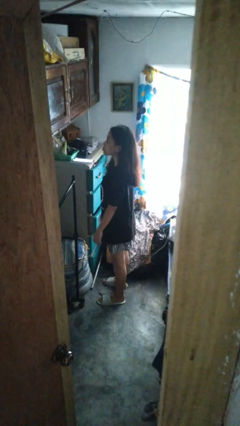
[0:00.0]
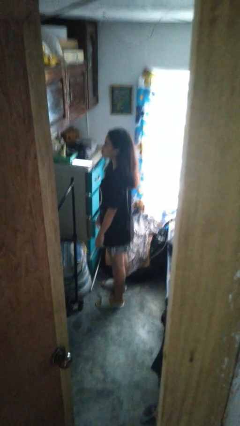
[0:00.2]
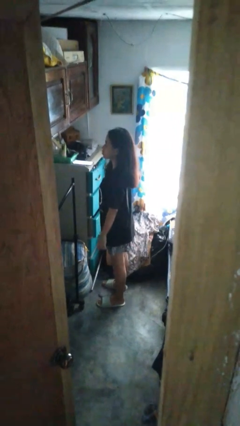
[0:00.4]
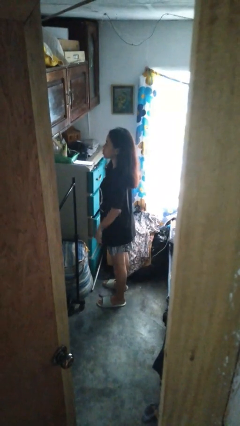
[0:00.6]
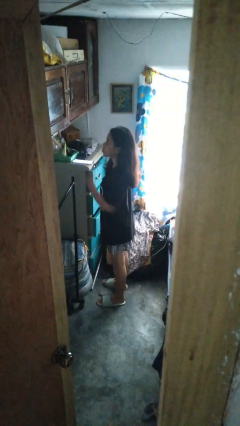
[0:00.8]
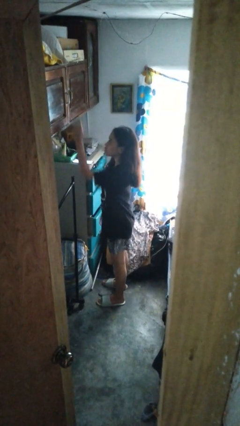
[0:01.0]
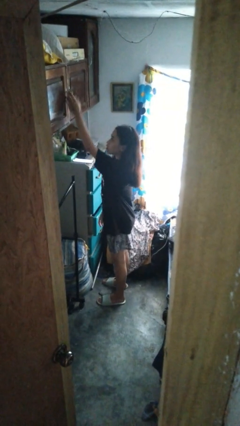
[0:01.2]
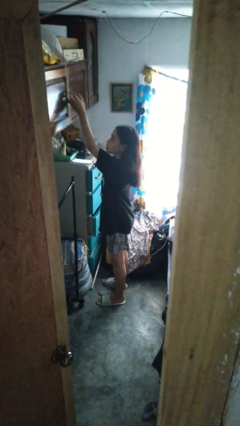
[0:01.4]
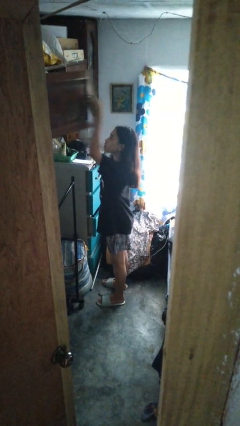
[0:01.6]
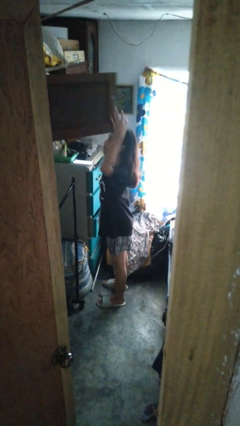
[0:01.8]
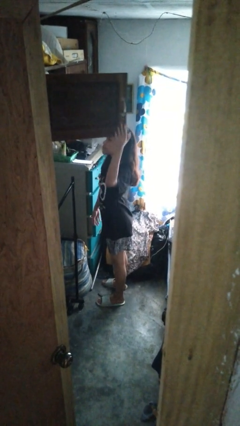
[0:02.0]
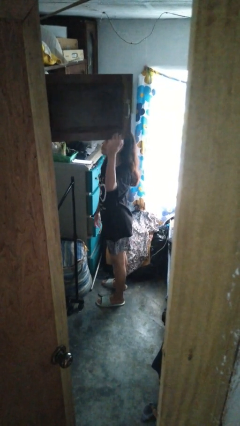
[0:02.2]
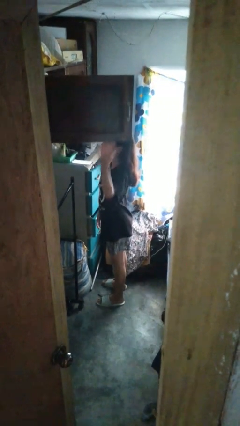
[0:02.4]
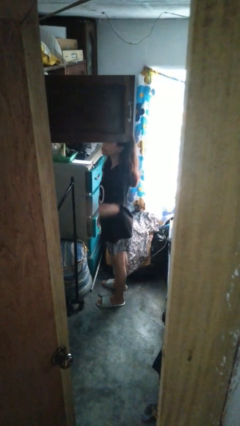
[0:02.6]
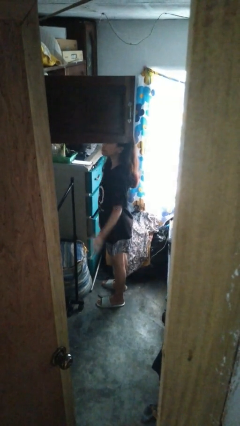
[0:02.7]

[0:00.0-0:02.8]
person opens closet door

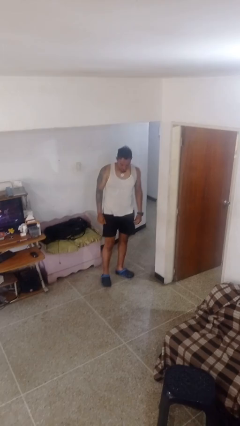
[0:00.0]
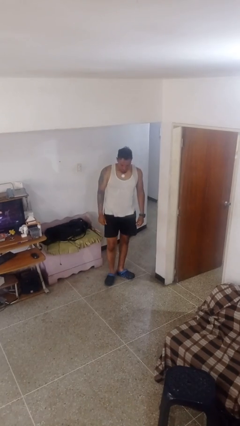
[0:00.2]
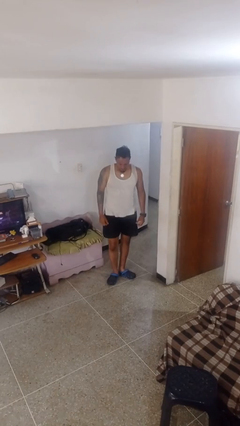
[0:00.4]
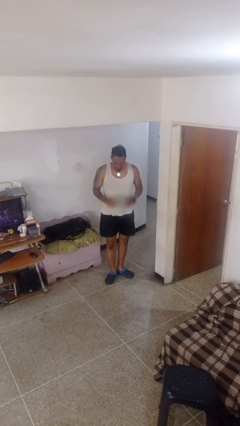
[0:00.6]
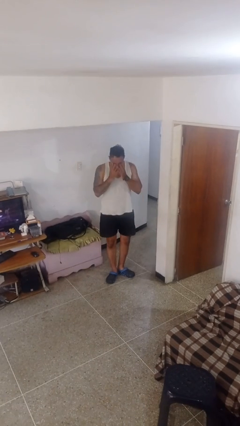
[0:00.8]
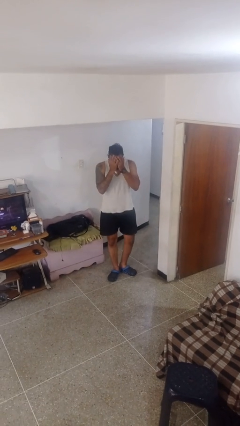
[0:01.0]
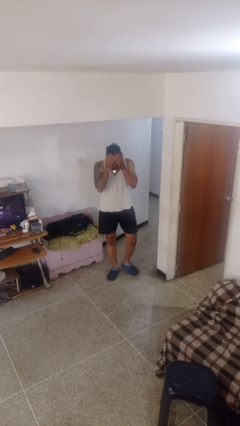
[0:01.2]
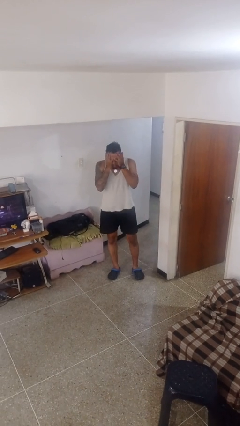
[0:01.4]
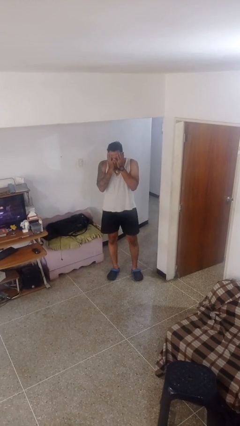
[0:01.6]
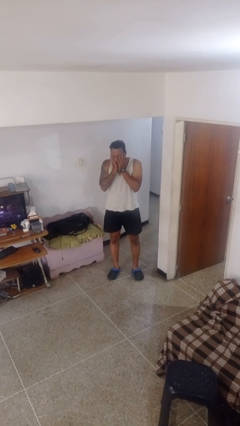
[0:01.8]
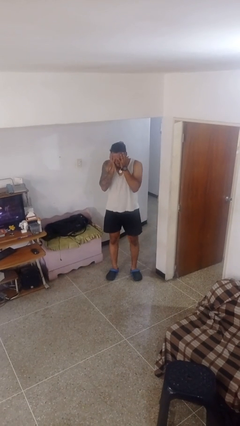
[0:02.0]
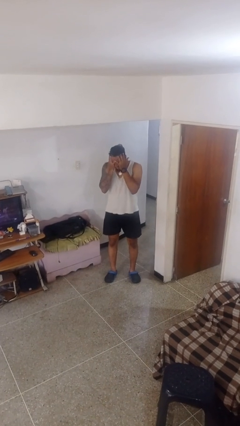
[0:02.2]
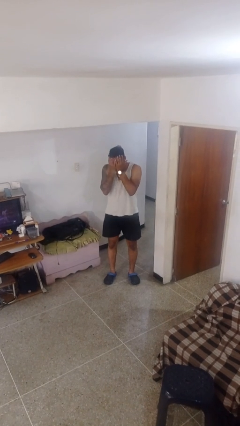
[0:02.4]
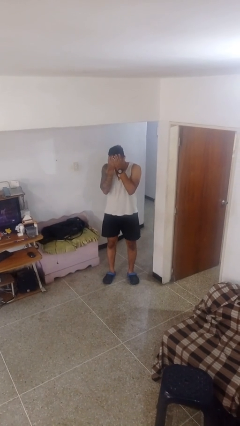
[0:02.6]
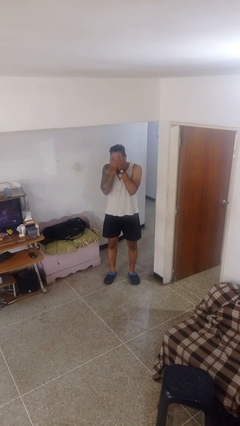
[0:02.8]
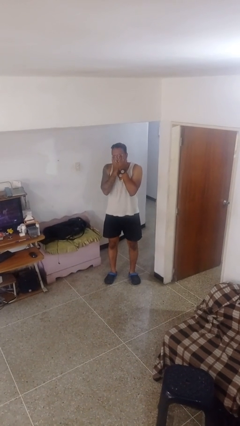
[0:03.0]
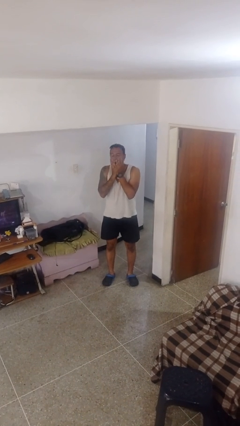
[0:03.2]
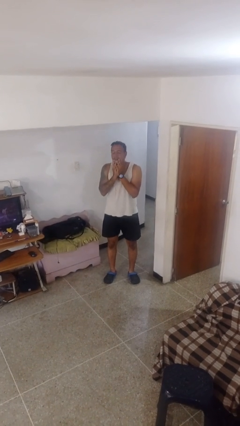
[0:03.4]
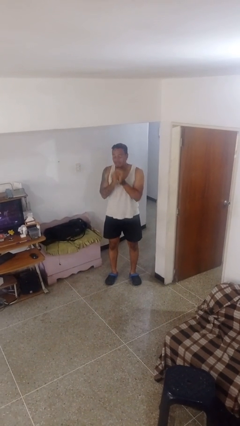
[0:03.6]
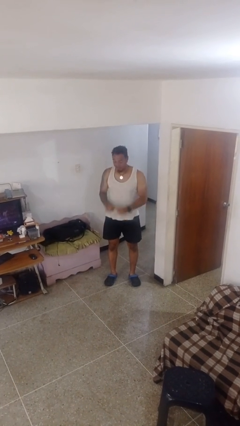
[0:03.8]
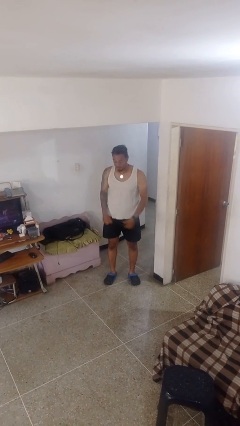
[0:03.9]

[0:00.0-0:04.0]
person scratches face

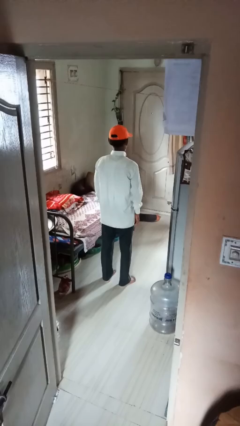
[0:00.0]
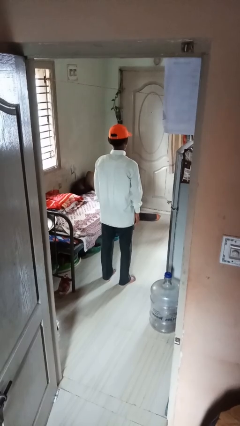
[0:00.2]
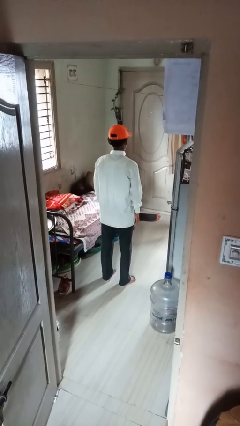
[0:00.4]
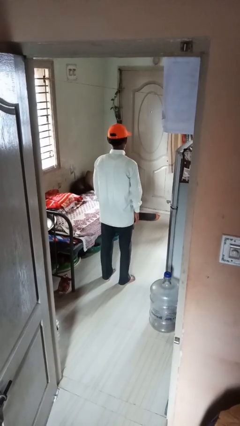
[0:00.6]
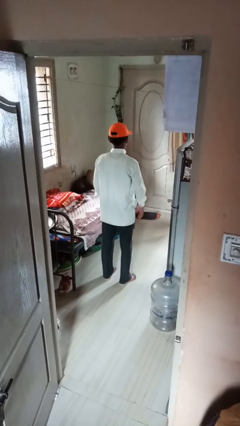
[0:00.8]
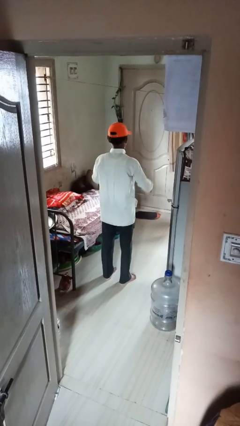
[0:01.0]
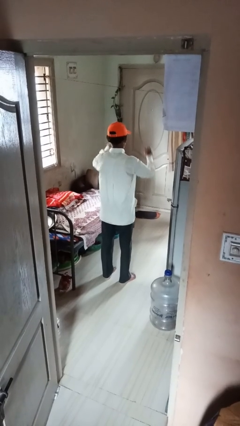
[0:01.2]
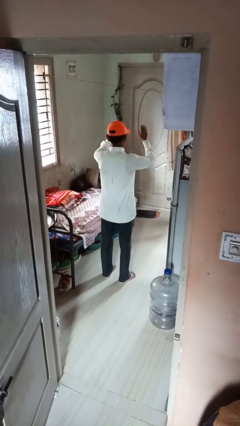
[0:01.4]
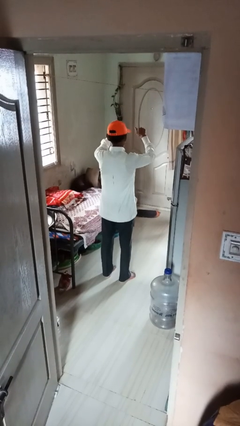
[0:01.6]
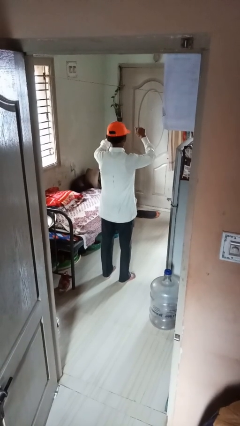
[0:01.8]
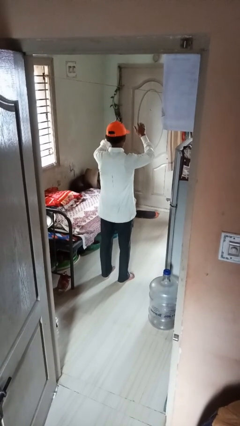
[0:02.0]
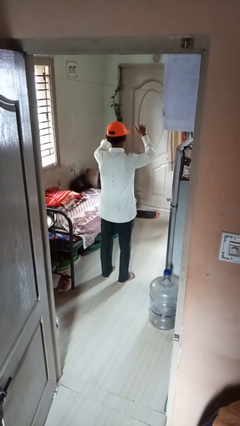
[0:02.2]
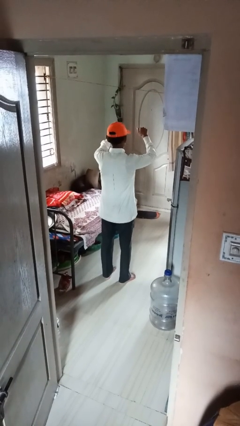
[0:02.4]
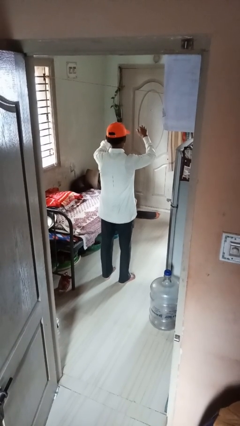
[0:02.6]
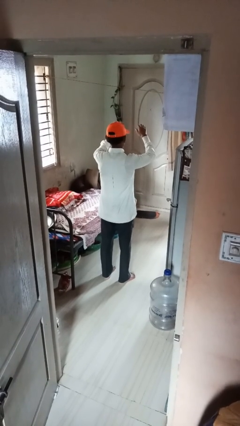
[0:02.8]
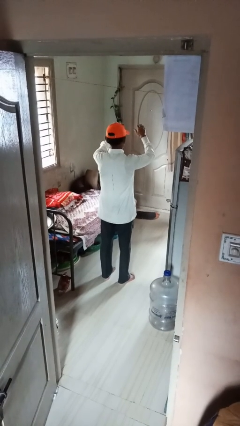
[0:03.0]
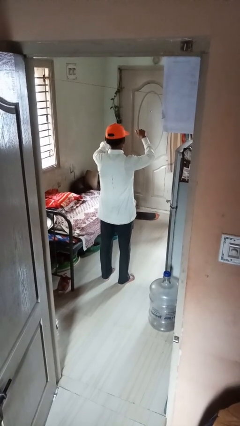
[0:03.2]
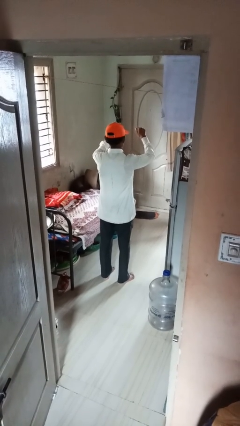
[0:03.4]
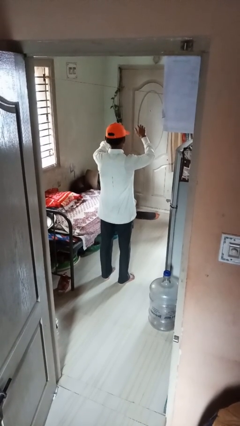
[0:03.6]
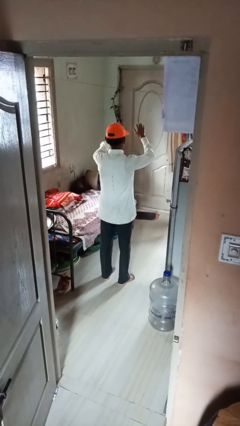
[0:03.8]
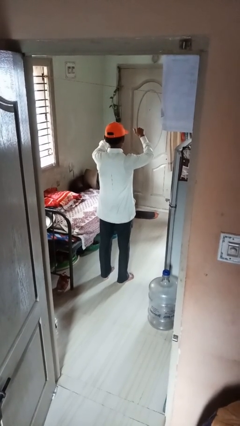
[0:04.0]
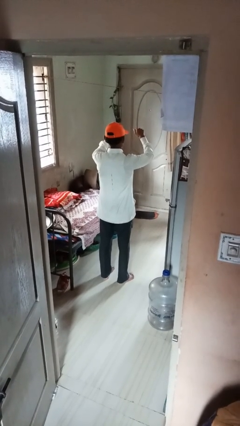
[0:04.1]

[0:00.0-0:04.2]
person gestures come here

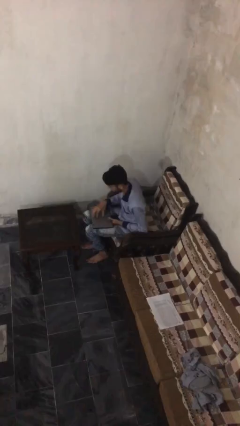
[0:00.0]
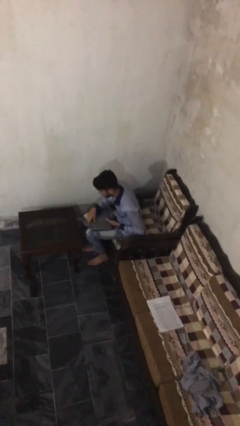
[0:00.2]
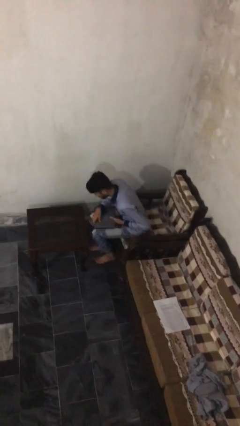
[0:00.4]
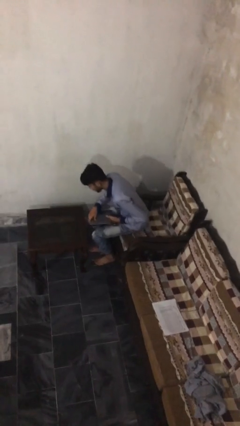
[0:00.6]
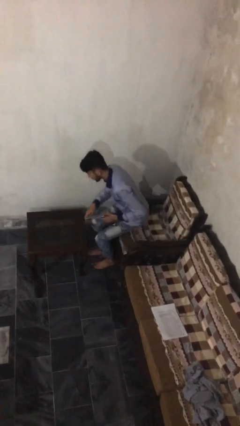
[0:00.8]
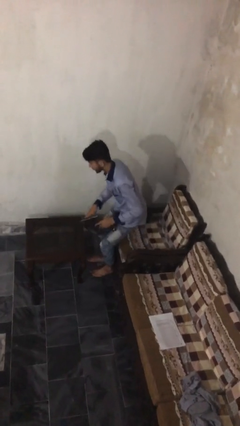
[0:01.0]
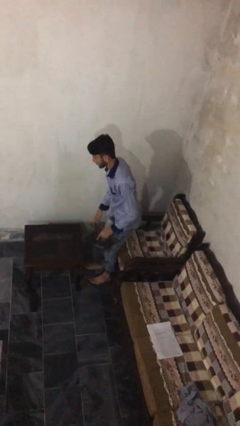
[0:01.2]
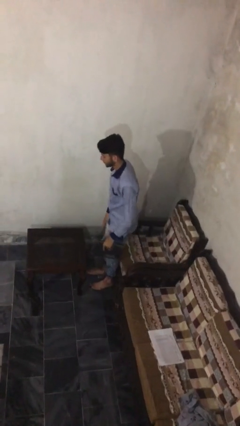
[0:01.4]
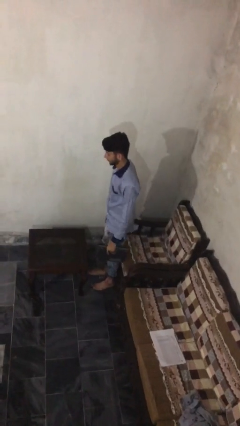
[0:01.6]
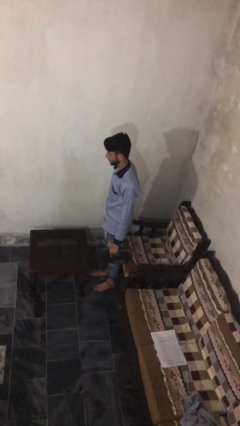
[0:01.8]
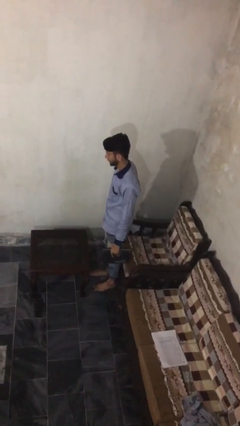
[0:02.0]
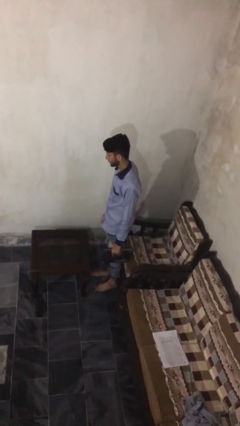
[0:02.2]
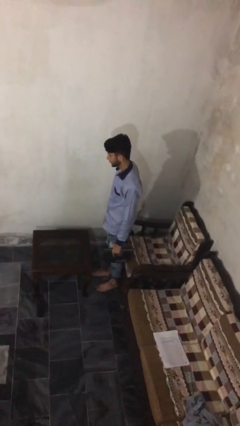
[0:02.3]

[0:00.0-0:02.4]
person stands up

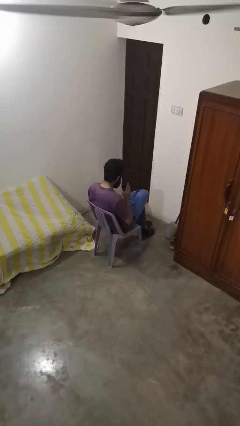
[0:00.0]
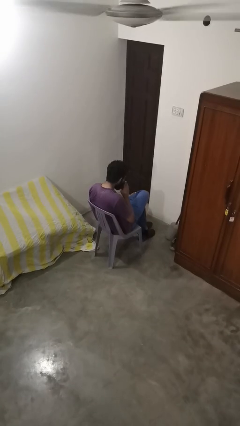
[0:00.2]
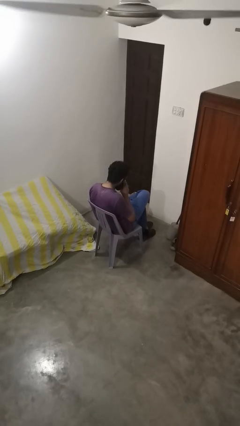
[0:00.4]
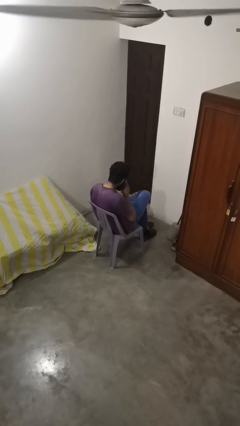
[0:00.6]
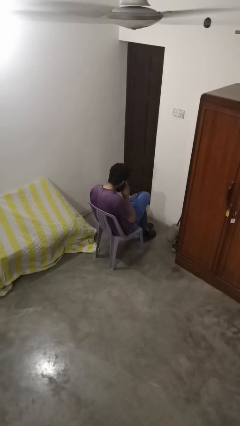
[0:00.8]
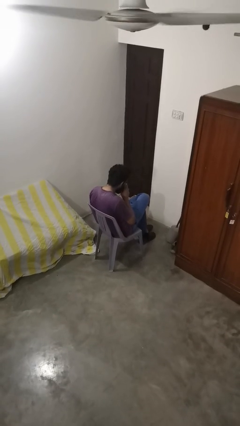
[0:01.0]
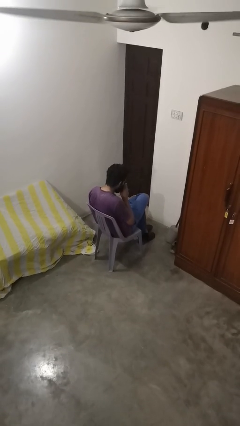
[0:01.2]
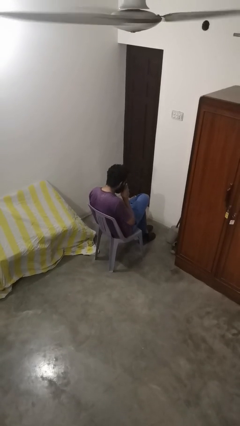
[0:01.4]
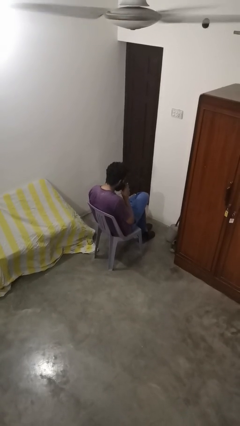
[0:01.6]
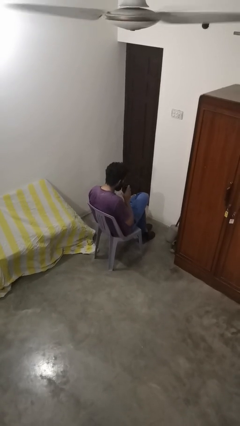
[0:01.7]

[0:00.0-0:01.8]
person drinks from straw

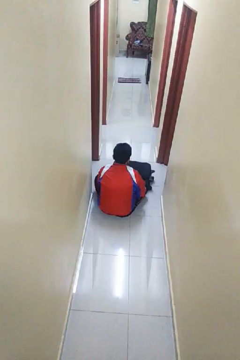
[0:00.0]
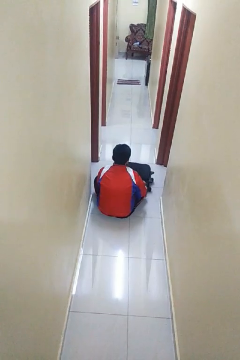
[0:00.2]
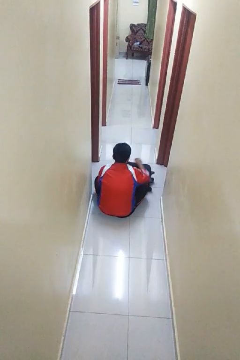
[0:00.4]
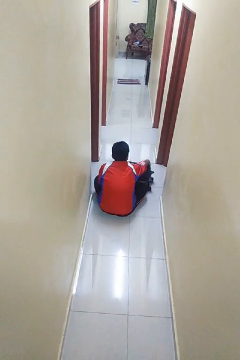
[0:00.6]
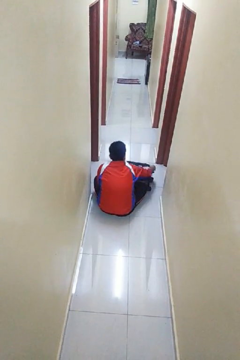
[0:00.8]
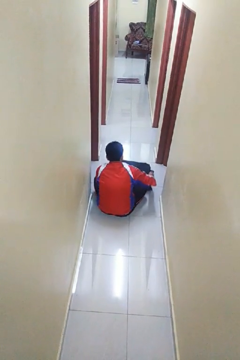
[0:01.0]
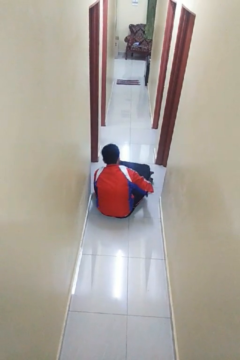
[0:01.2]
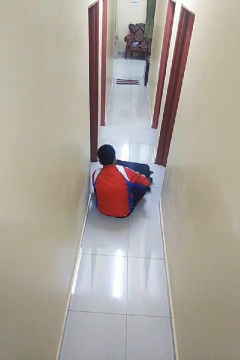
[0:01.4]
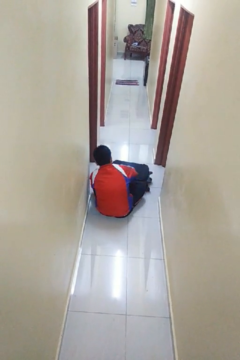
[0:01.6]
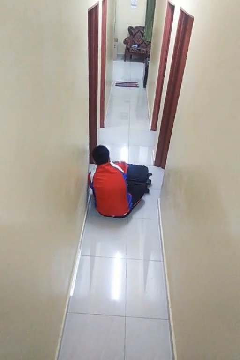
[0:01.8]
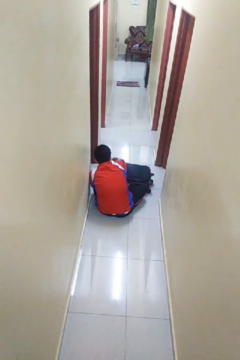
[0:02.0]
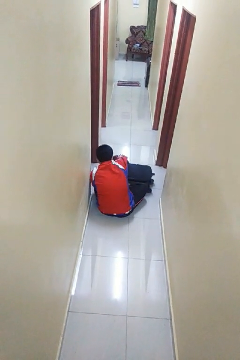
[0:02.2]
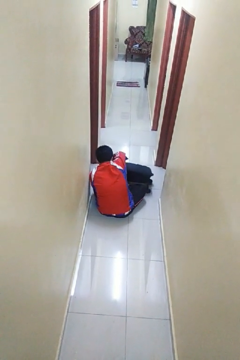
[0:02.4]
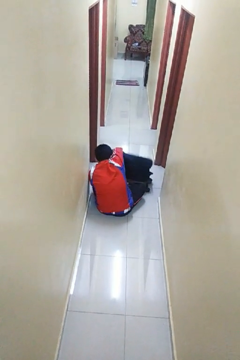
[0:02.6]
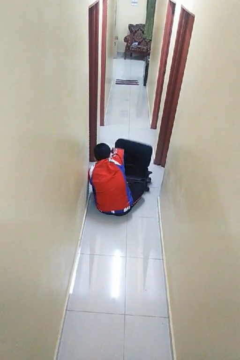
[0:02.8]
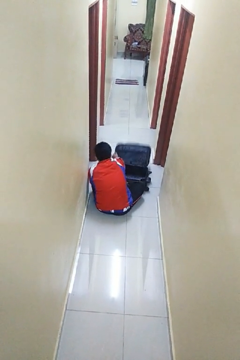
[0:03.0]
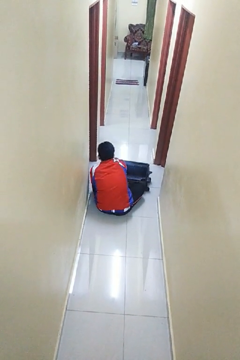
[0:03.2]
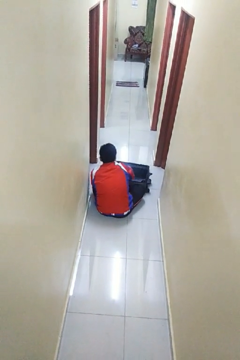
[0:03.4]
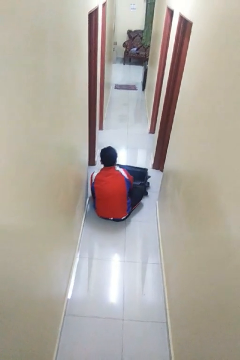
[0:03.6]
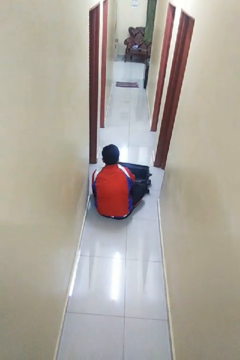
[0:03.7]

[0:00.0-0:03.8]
person opens suitcase
